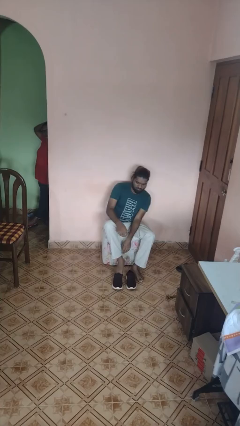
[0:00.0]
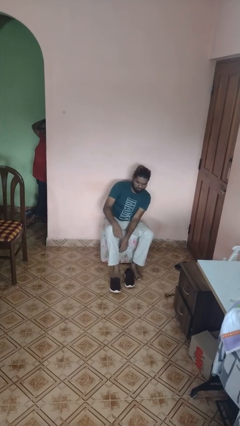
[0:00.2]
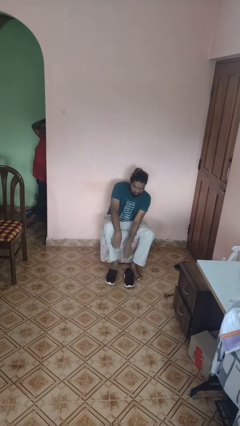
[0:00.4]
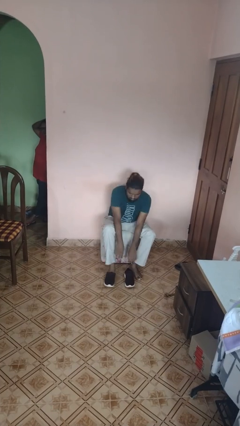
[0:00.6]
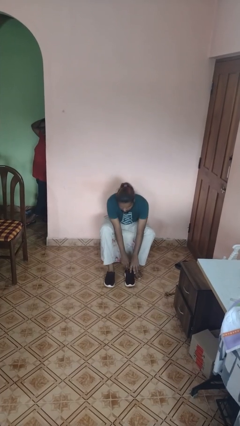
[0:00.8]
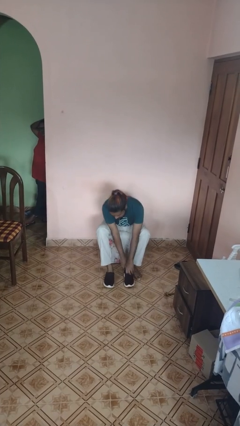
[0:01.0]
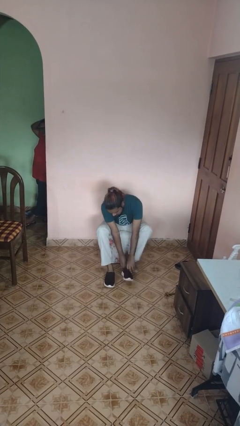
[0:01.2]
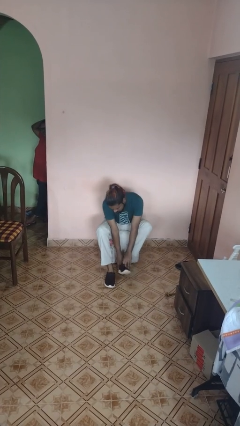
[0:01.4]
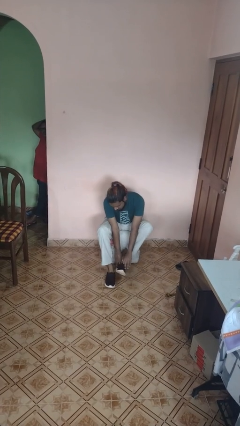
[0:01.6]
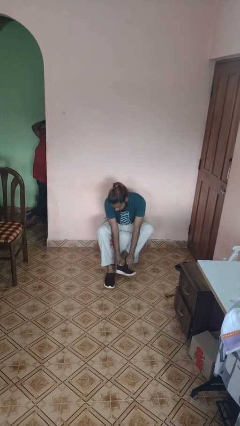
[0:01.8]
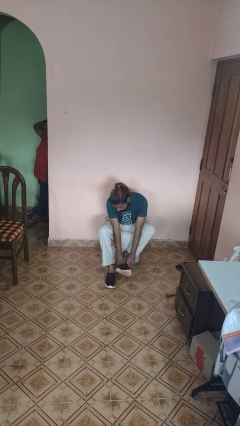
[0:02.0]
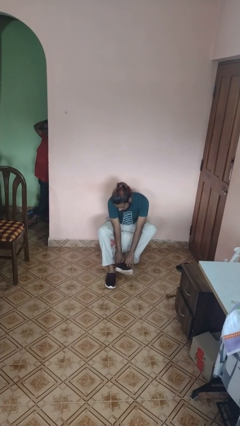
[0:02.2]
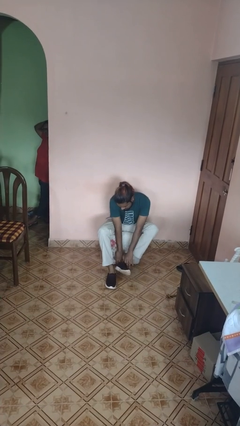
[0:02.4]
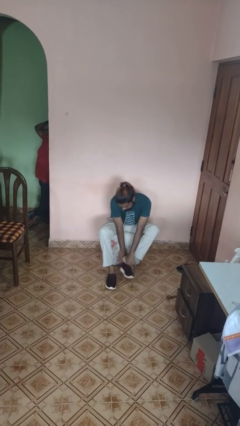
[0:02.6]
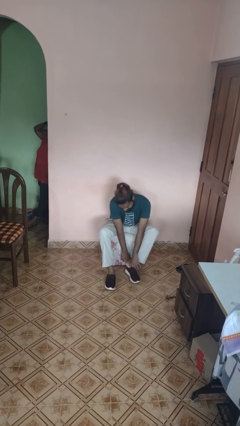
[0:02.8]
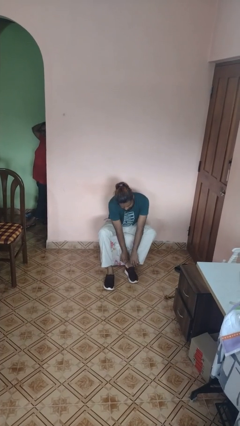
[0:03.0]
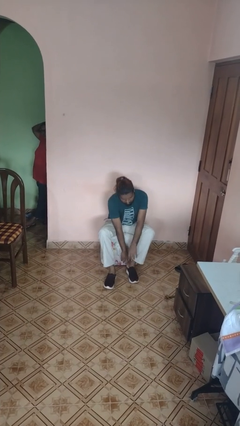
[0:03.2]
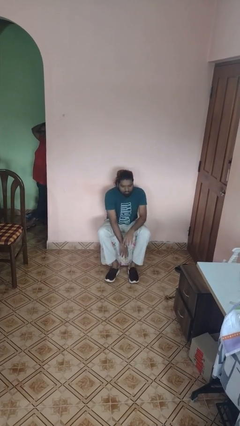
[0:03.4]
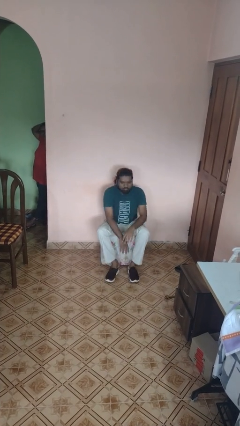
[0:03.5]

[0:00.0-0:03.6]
person puts on shoes

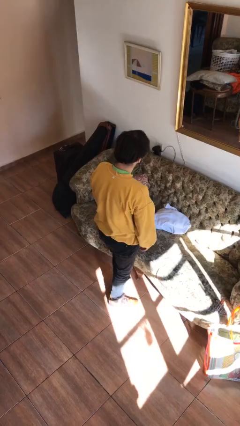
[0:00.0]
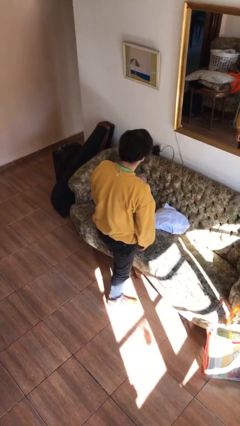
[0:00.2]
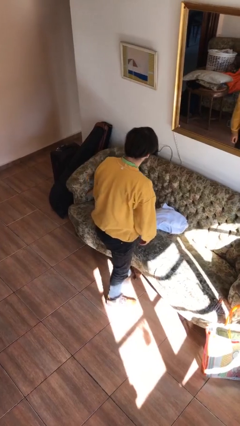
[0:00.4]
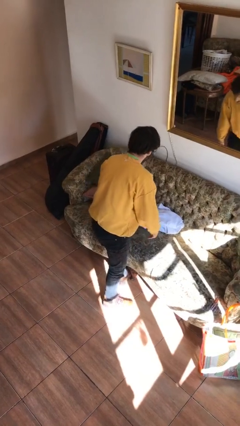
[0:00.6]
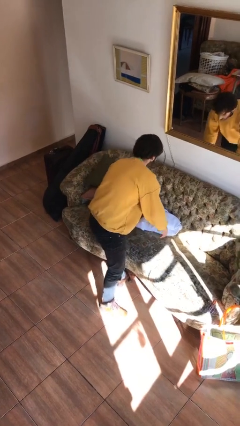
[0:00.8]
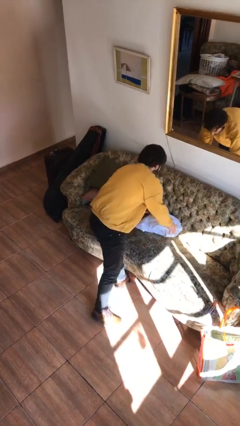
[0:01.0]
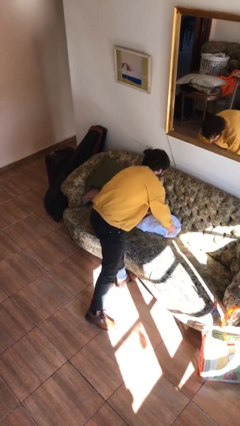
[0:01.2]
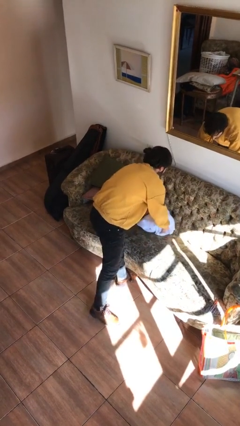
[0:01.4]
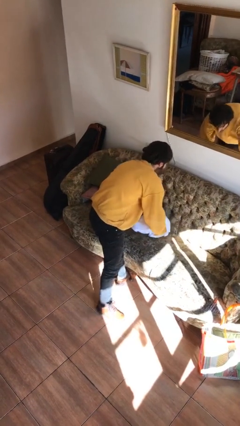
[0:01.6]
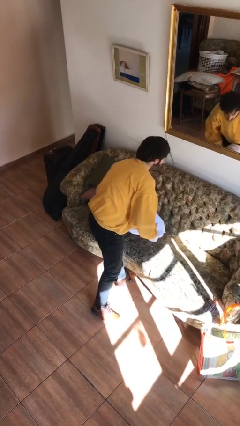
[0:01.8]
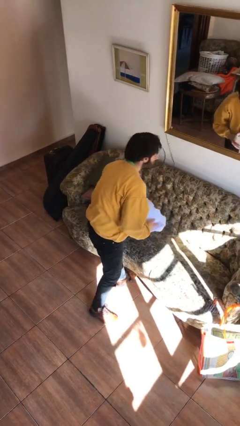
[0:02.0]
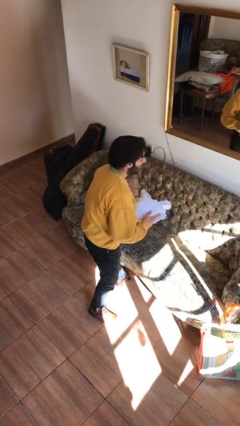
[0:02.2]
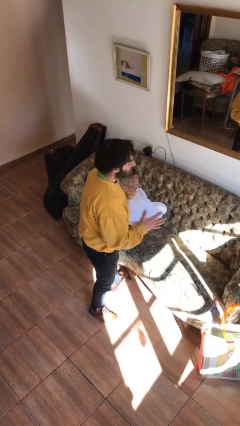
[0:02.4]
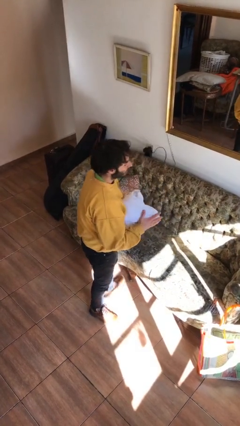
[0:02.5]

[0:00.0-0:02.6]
person picks up object from couch

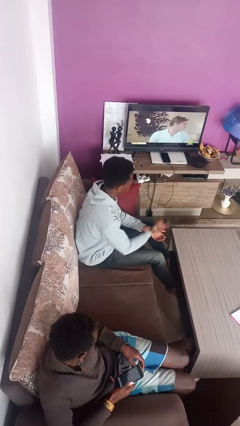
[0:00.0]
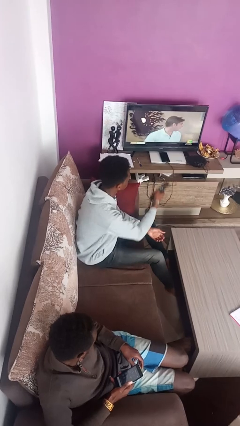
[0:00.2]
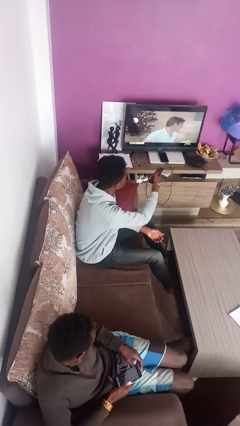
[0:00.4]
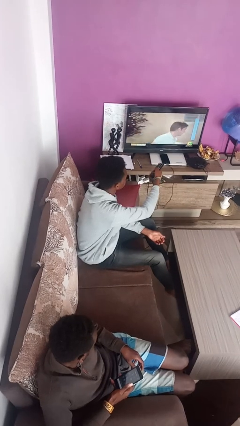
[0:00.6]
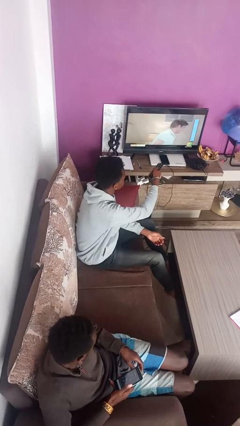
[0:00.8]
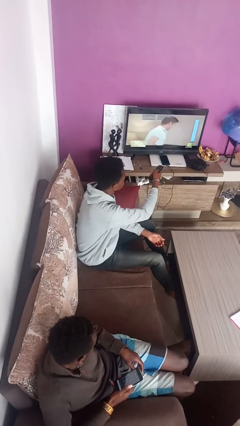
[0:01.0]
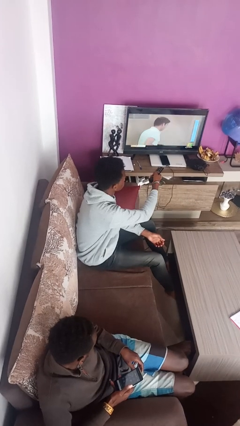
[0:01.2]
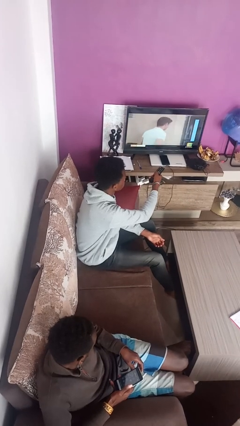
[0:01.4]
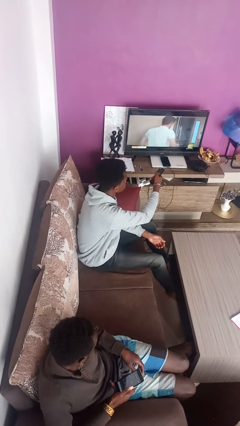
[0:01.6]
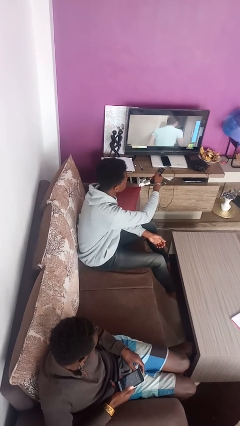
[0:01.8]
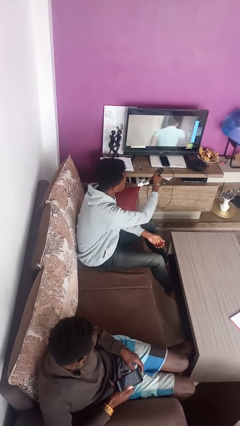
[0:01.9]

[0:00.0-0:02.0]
person uses television remote

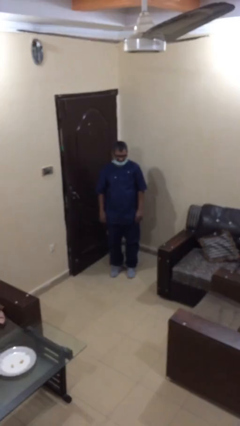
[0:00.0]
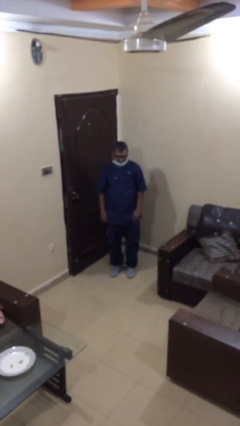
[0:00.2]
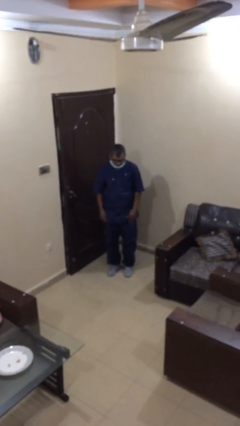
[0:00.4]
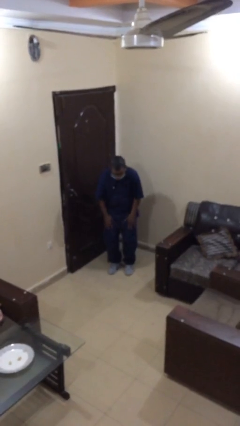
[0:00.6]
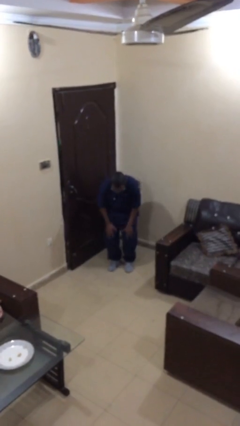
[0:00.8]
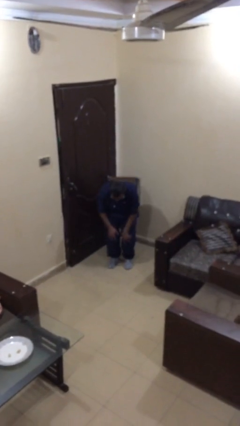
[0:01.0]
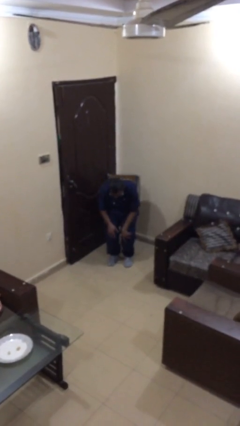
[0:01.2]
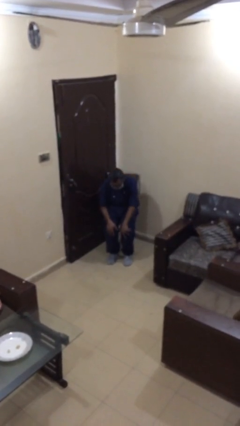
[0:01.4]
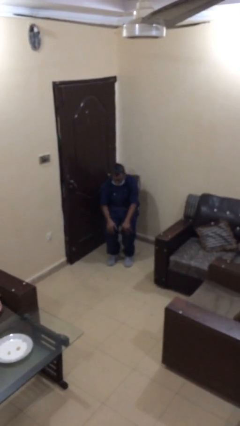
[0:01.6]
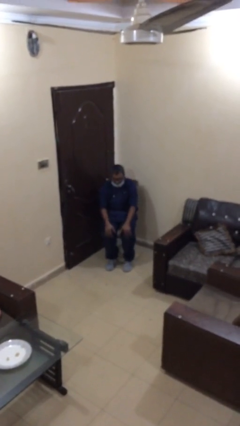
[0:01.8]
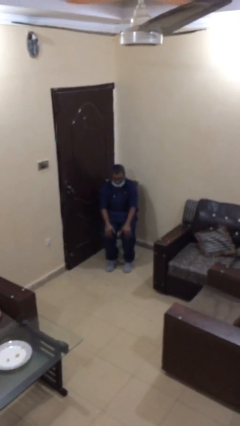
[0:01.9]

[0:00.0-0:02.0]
person sits down

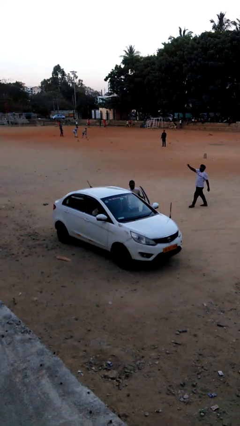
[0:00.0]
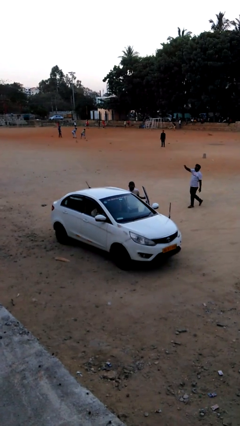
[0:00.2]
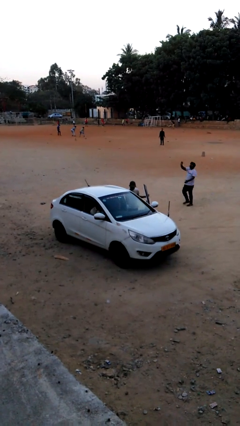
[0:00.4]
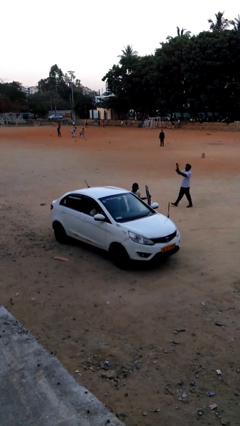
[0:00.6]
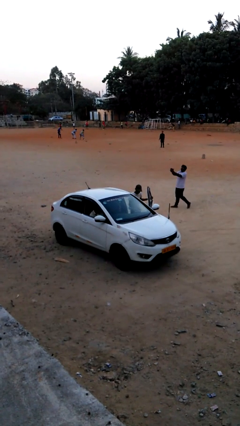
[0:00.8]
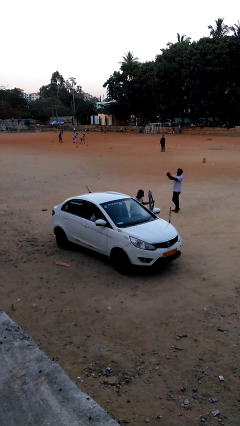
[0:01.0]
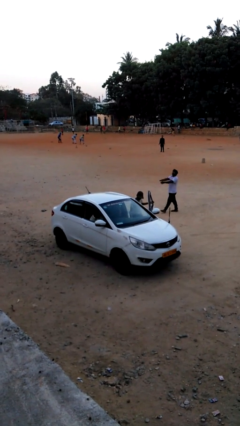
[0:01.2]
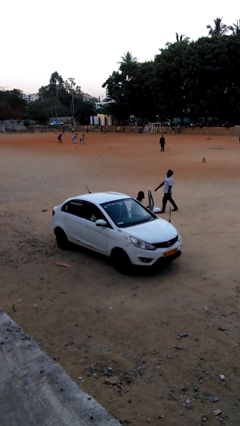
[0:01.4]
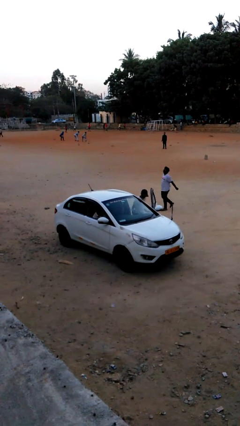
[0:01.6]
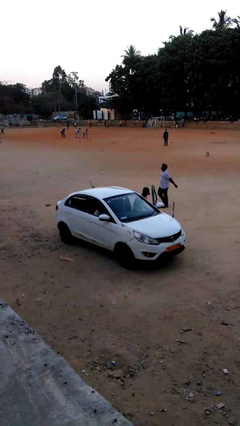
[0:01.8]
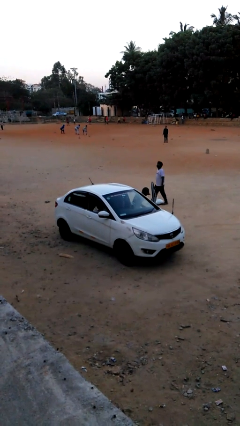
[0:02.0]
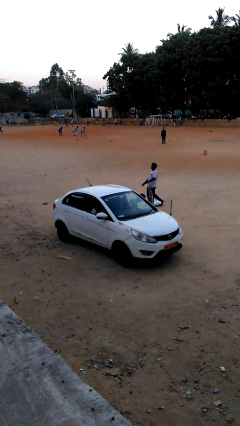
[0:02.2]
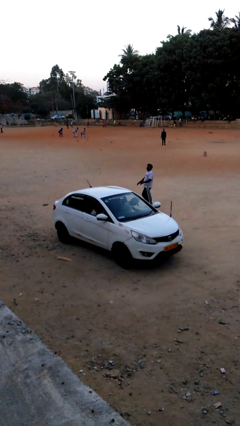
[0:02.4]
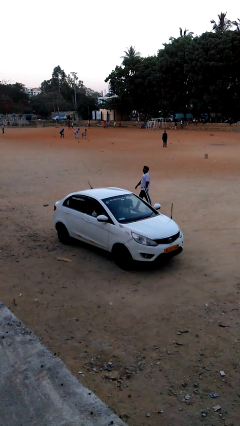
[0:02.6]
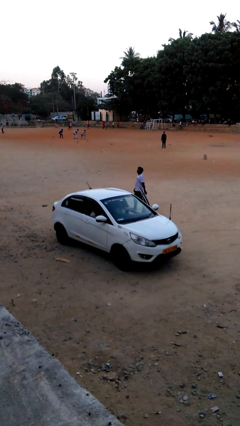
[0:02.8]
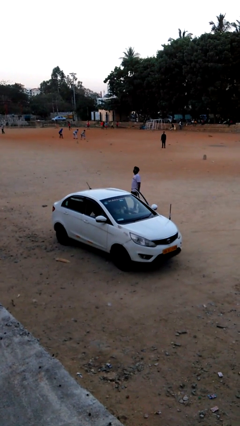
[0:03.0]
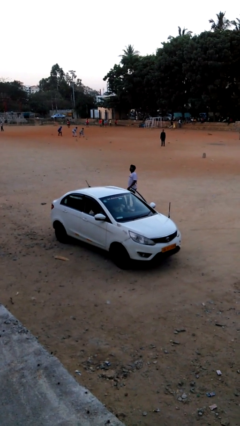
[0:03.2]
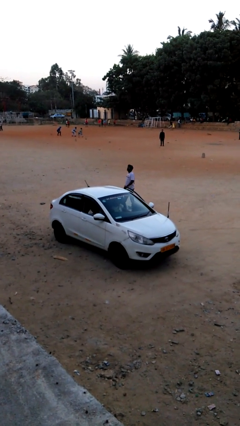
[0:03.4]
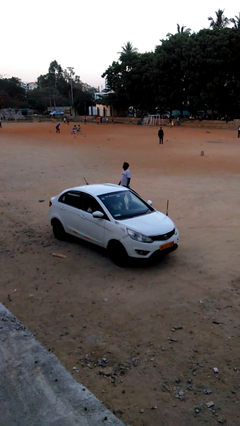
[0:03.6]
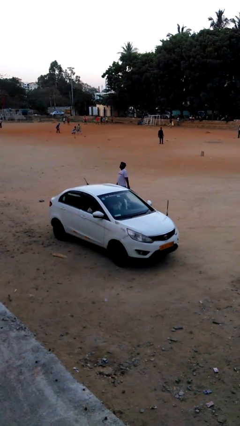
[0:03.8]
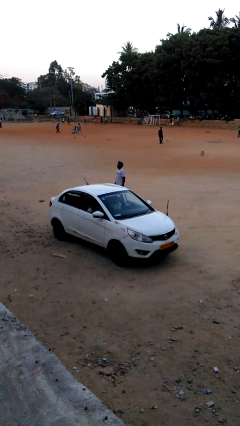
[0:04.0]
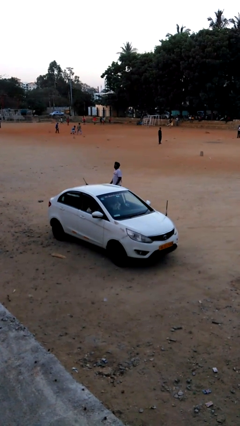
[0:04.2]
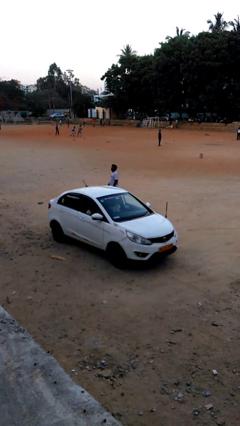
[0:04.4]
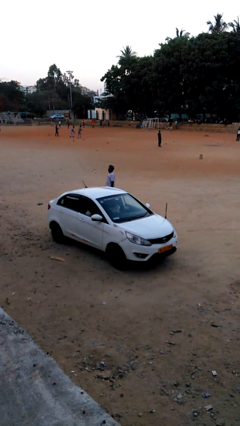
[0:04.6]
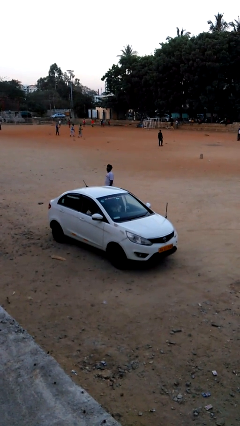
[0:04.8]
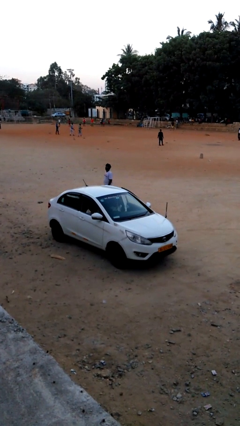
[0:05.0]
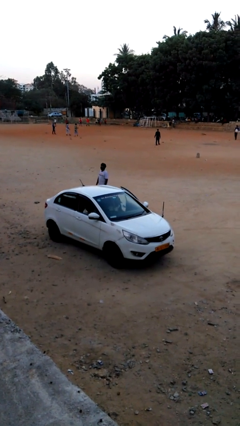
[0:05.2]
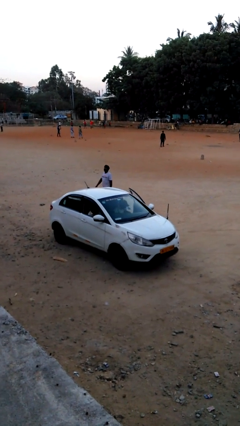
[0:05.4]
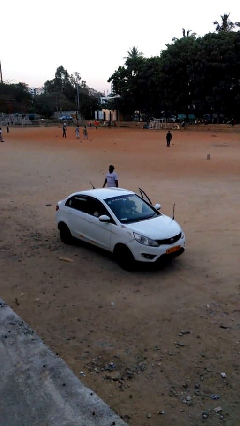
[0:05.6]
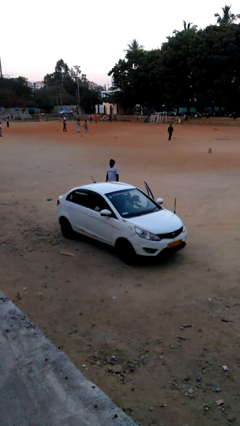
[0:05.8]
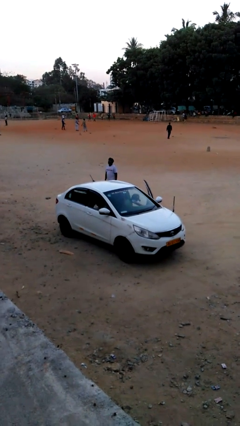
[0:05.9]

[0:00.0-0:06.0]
car picks up person

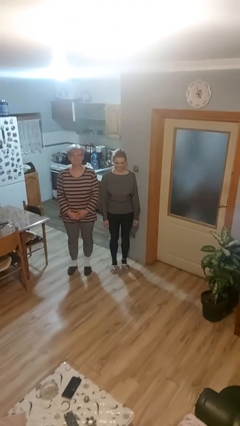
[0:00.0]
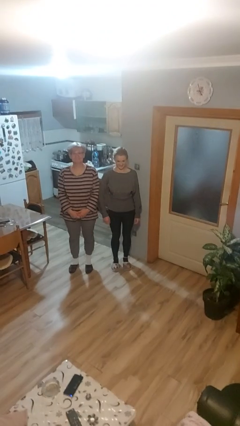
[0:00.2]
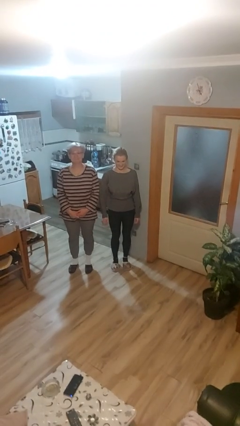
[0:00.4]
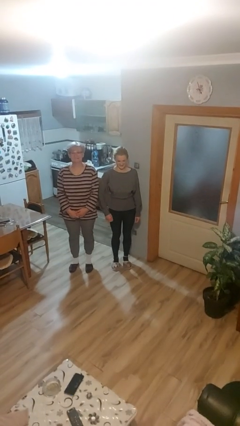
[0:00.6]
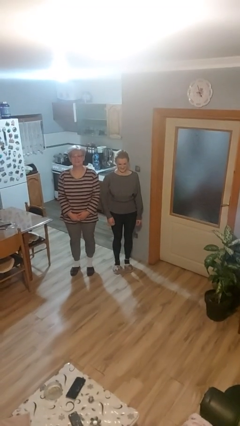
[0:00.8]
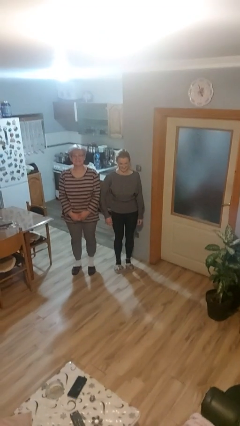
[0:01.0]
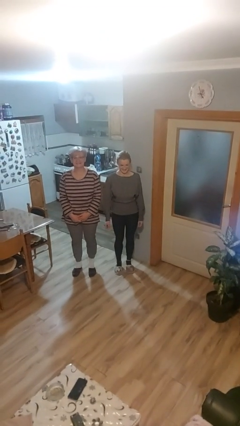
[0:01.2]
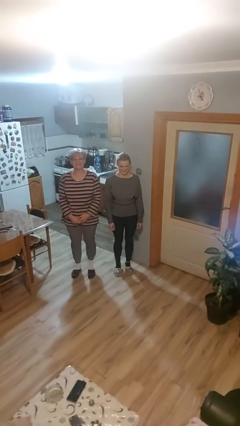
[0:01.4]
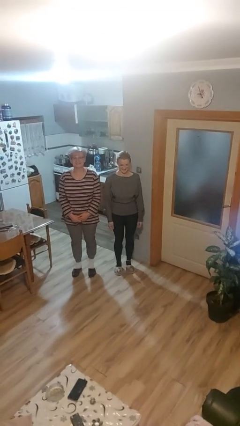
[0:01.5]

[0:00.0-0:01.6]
person nudges person with elbow
